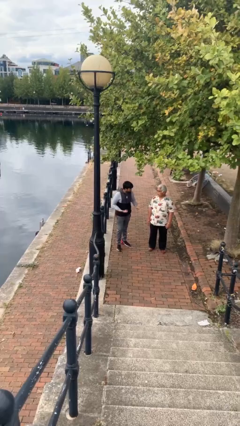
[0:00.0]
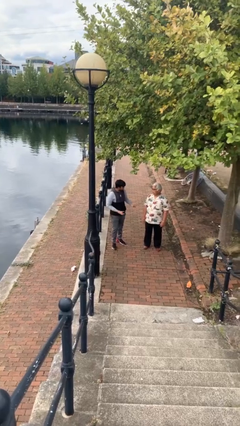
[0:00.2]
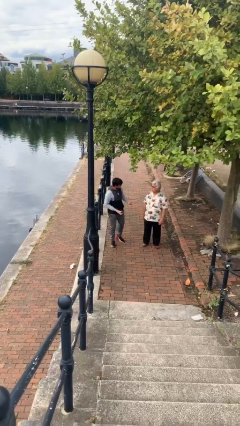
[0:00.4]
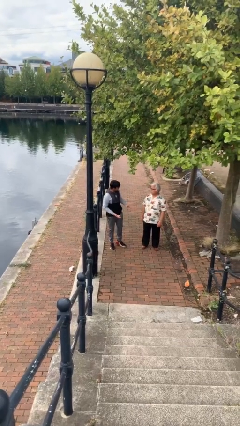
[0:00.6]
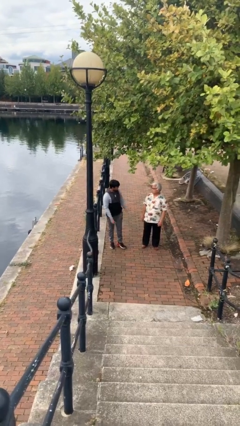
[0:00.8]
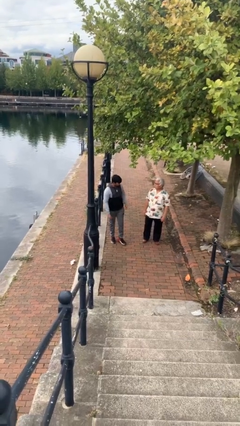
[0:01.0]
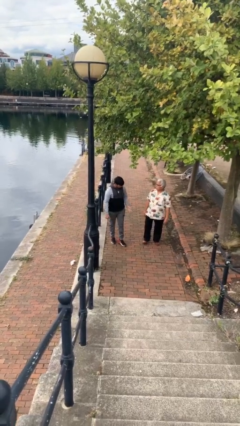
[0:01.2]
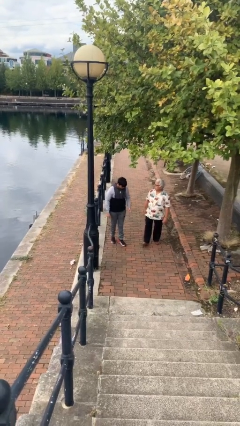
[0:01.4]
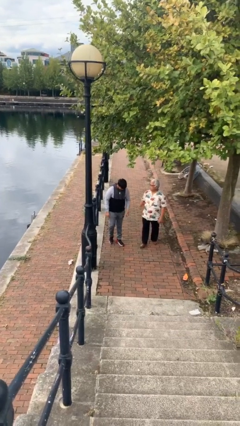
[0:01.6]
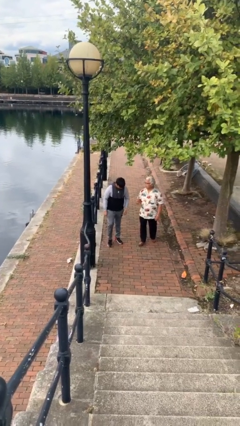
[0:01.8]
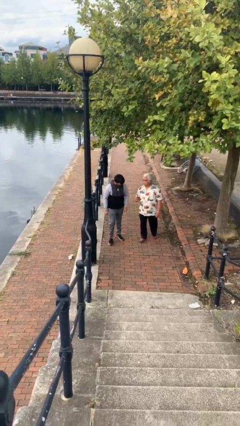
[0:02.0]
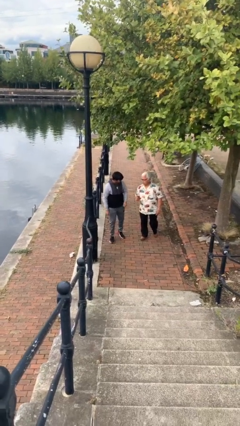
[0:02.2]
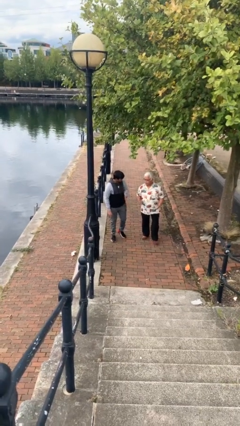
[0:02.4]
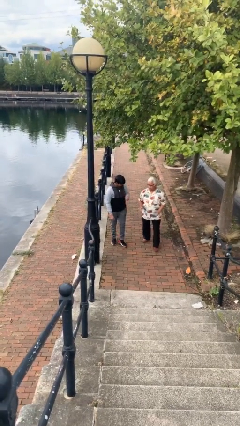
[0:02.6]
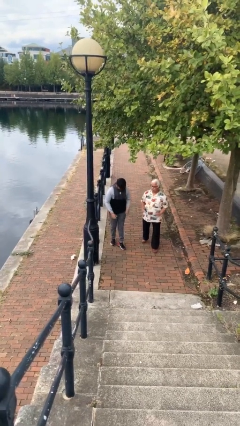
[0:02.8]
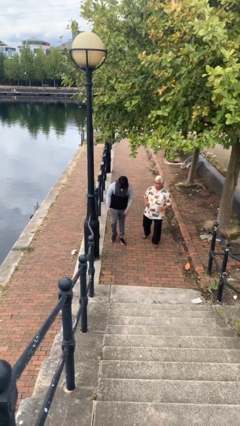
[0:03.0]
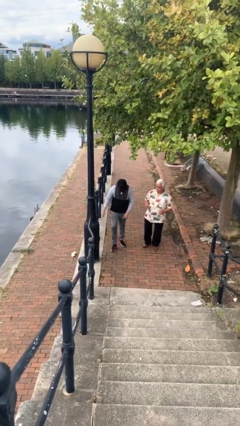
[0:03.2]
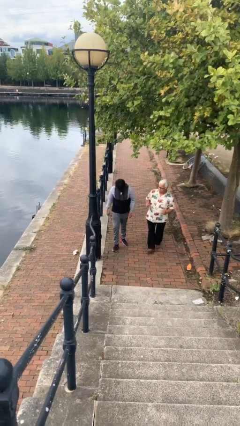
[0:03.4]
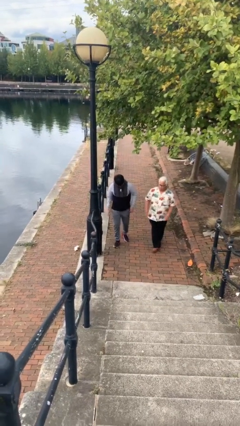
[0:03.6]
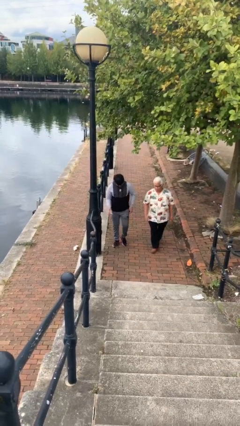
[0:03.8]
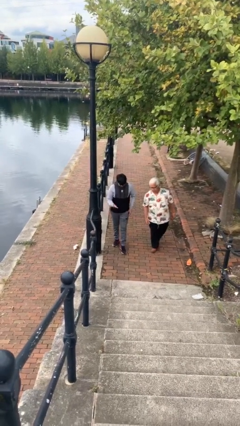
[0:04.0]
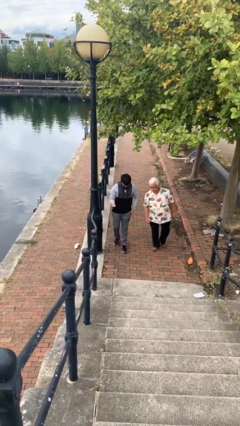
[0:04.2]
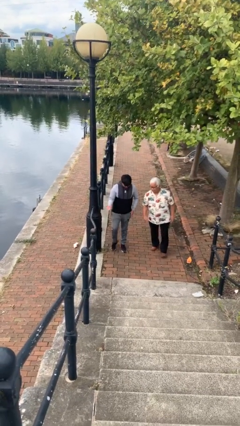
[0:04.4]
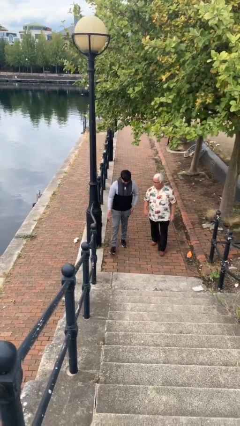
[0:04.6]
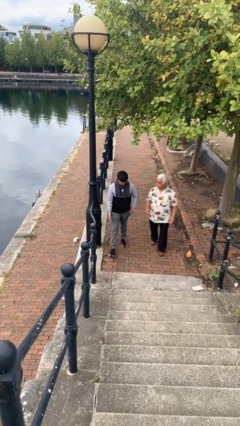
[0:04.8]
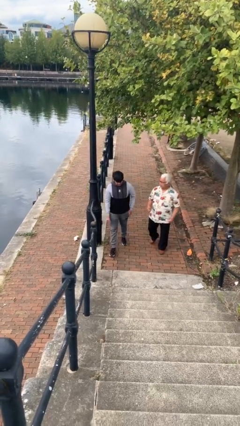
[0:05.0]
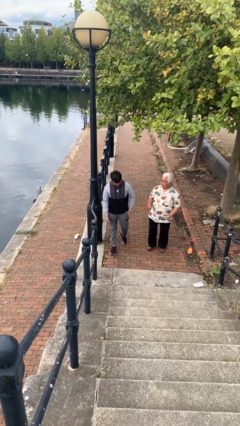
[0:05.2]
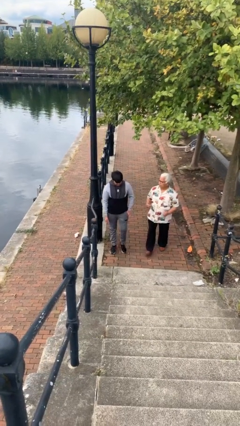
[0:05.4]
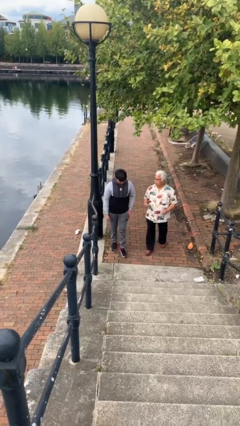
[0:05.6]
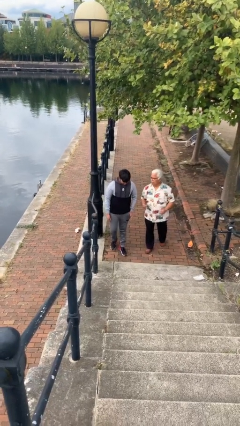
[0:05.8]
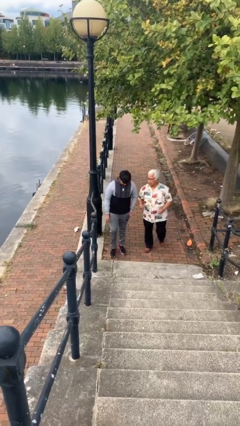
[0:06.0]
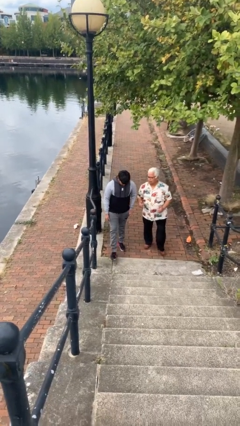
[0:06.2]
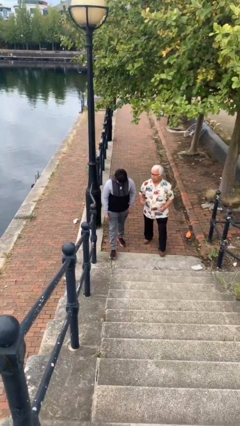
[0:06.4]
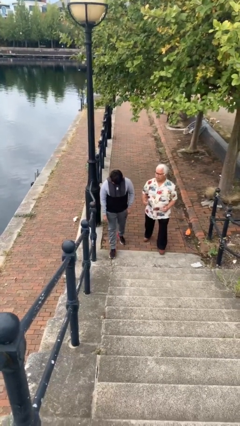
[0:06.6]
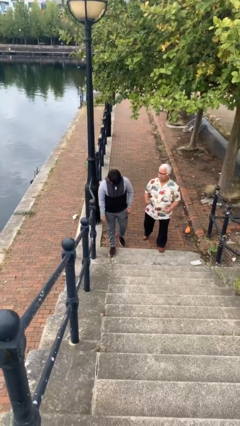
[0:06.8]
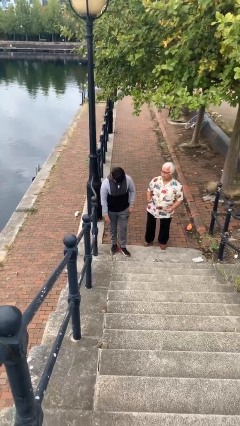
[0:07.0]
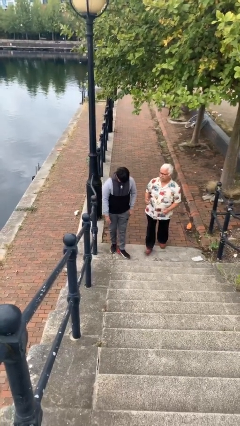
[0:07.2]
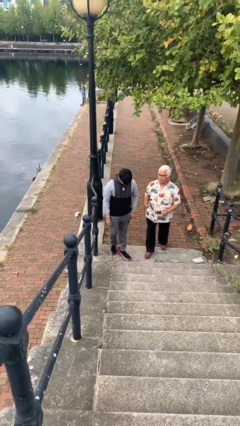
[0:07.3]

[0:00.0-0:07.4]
person talks to person

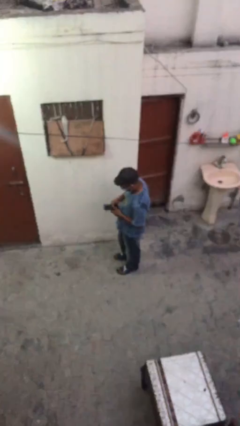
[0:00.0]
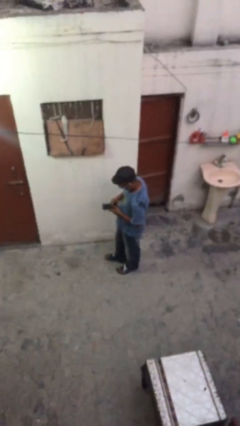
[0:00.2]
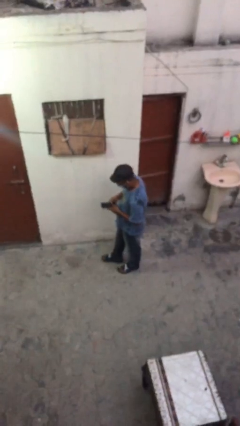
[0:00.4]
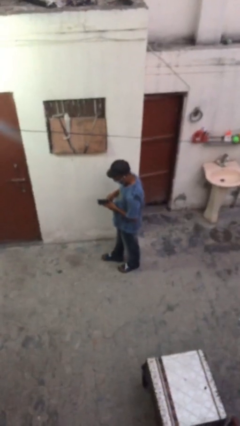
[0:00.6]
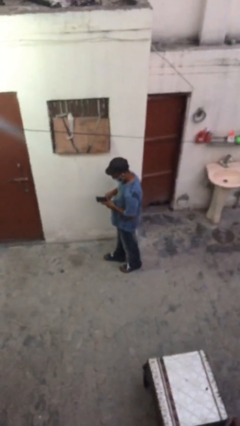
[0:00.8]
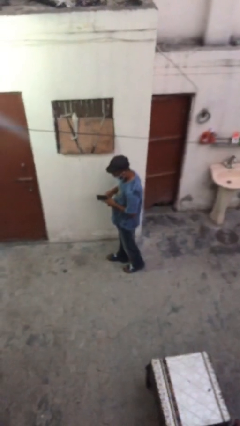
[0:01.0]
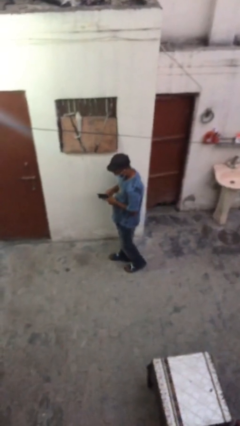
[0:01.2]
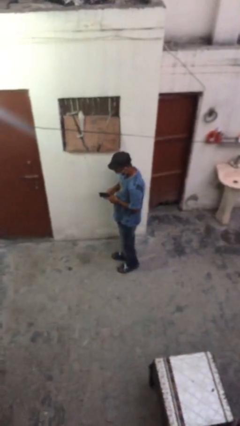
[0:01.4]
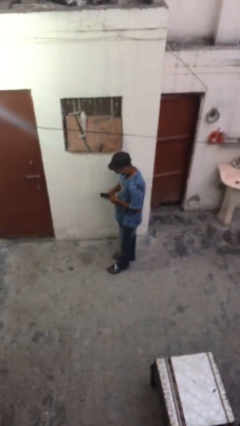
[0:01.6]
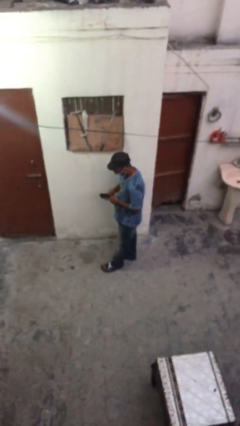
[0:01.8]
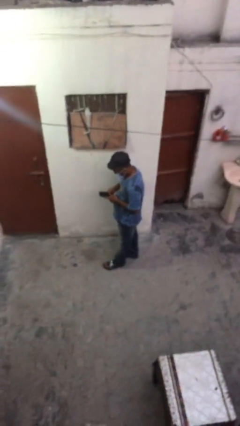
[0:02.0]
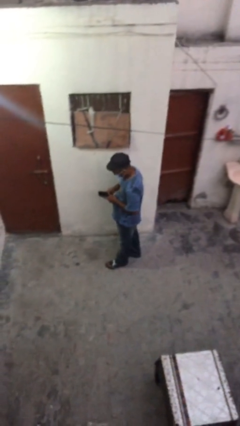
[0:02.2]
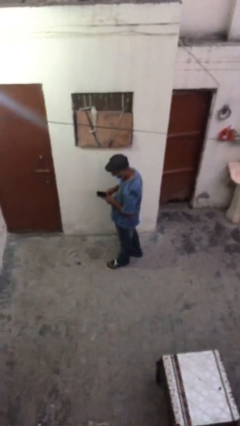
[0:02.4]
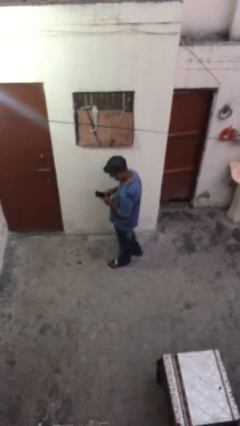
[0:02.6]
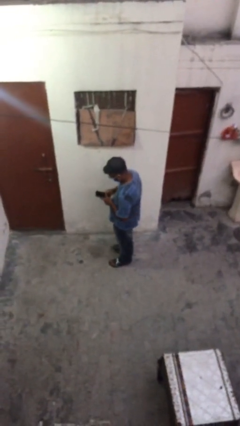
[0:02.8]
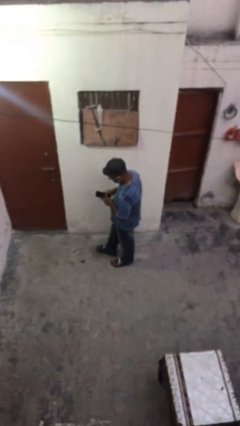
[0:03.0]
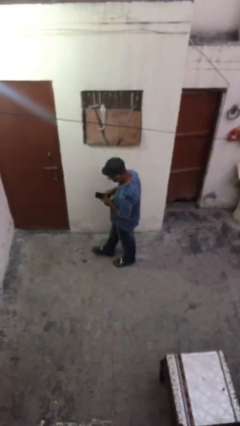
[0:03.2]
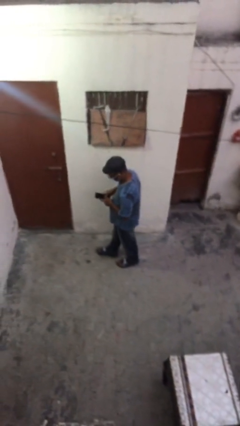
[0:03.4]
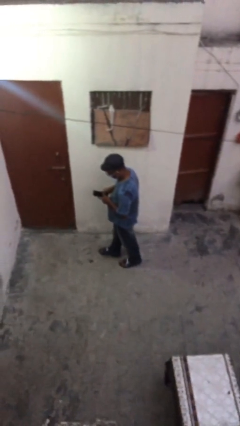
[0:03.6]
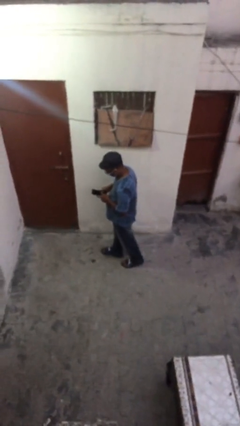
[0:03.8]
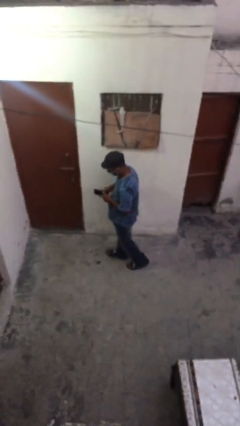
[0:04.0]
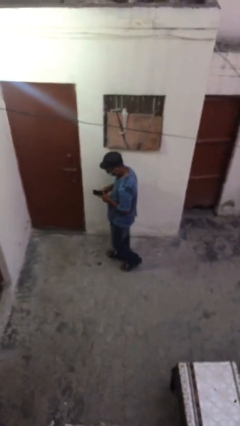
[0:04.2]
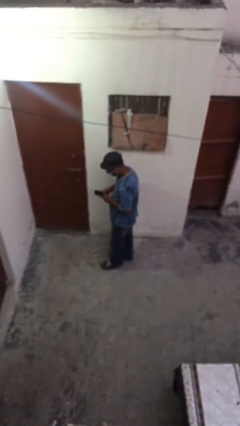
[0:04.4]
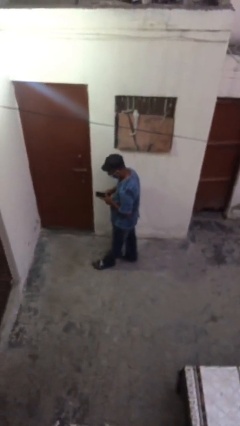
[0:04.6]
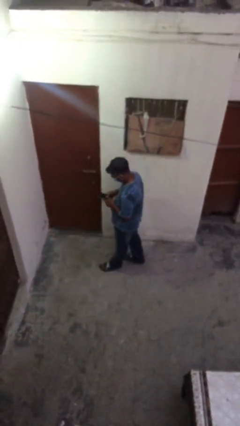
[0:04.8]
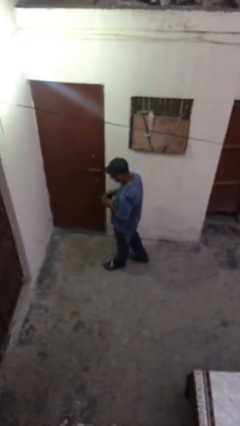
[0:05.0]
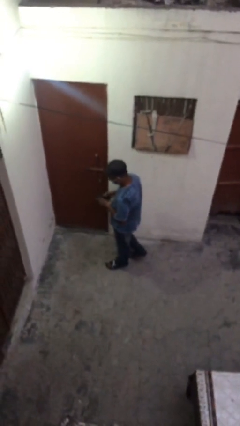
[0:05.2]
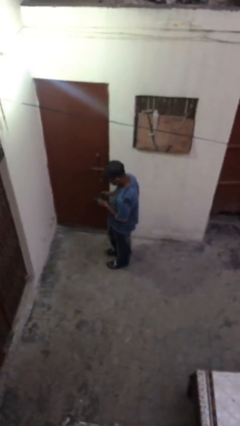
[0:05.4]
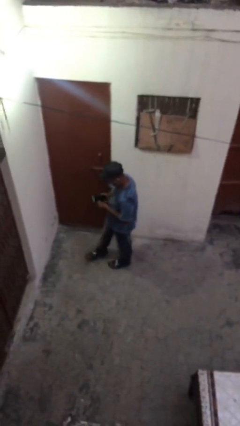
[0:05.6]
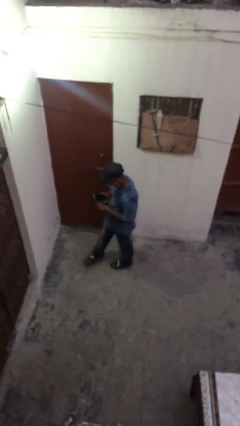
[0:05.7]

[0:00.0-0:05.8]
person texts on phone

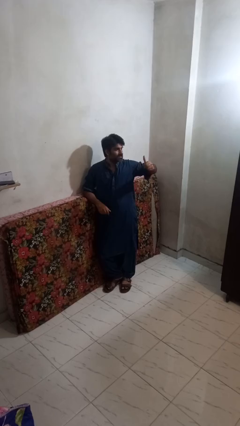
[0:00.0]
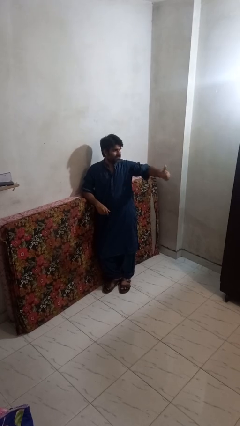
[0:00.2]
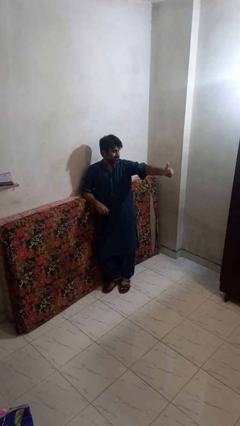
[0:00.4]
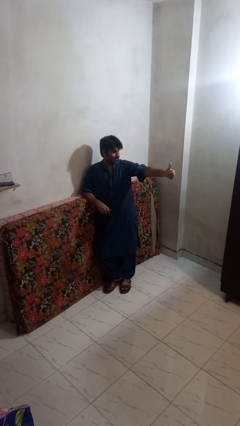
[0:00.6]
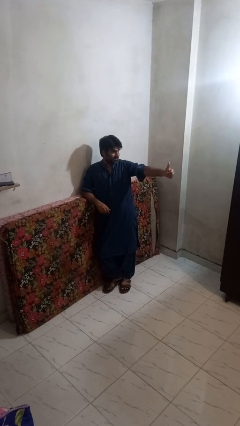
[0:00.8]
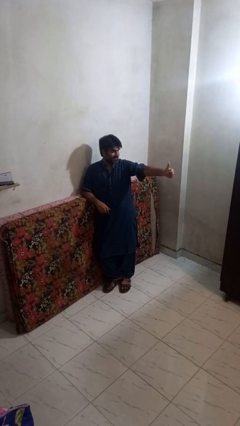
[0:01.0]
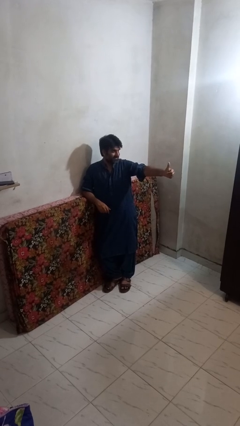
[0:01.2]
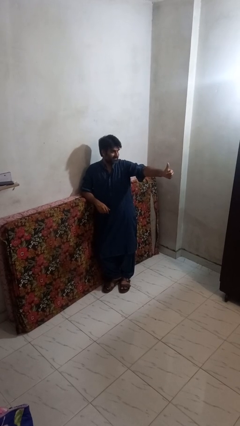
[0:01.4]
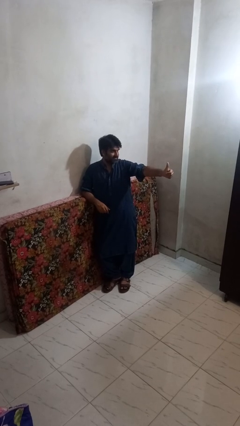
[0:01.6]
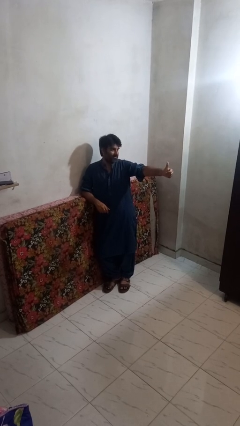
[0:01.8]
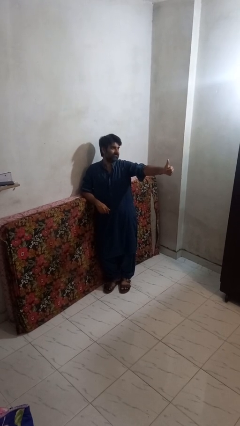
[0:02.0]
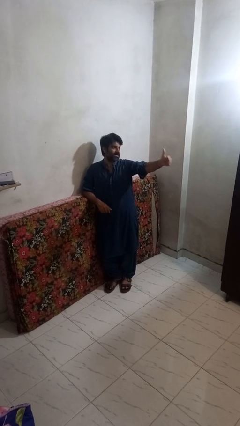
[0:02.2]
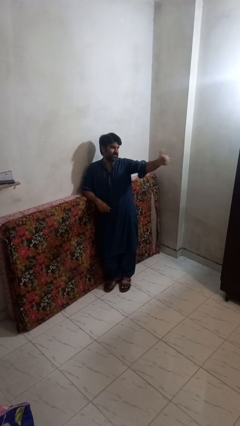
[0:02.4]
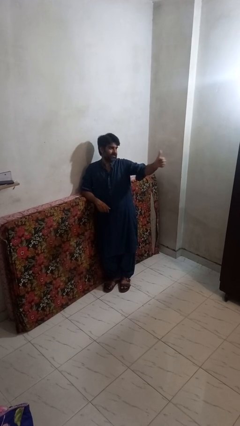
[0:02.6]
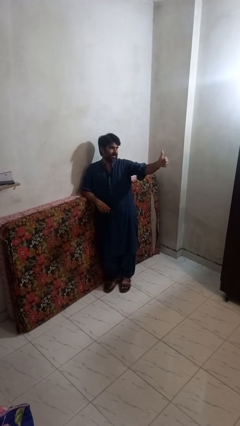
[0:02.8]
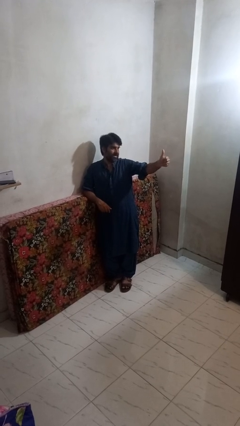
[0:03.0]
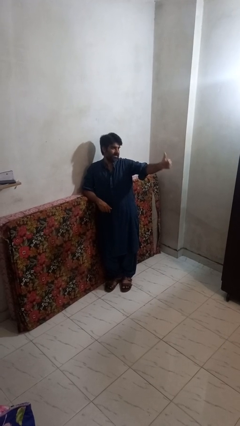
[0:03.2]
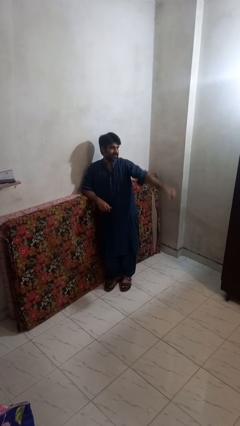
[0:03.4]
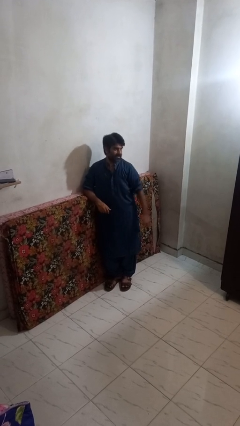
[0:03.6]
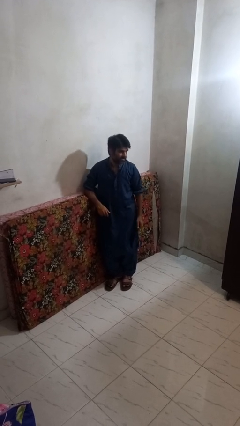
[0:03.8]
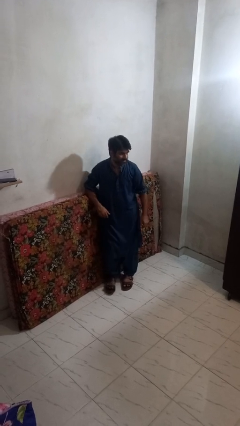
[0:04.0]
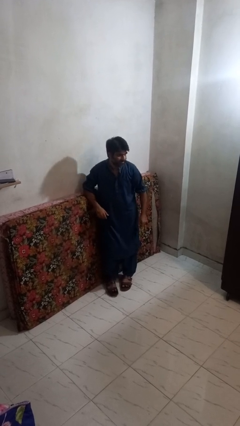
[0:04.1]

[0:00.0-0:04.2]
person gestures thumbs up

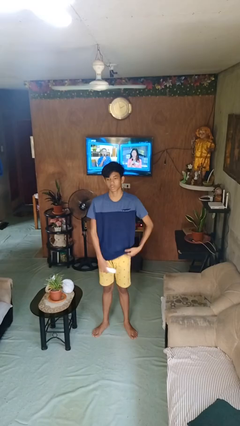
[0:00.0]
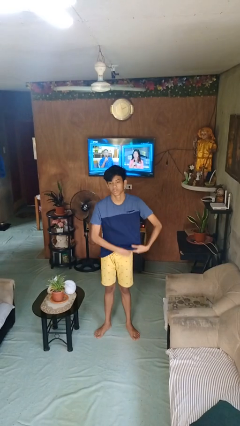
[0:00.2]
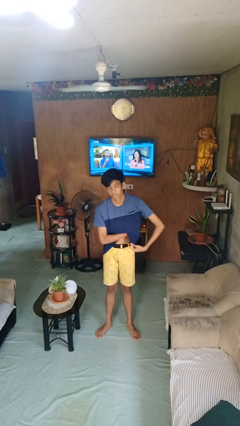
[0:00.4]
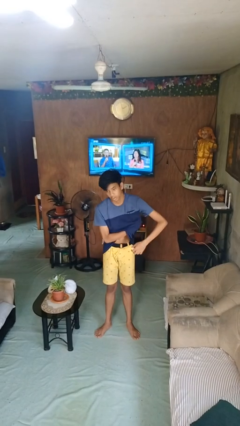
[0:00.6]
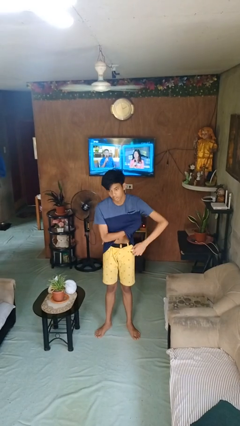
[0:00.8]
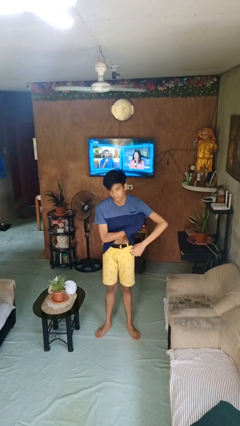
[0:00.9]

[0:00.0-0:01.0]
person applies deodorant
